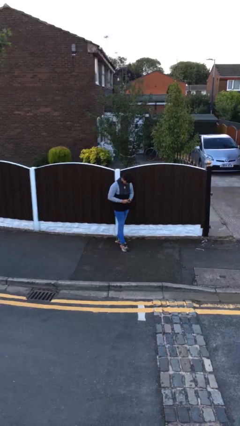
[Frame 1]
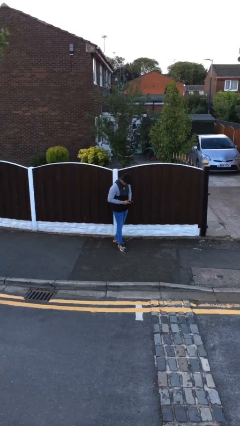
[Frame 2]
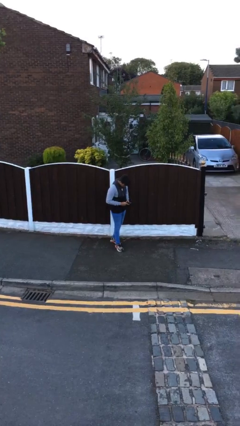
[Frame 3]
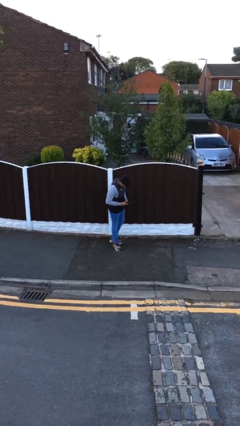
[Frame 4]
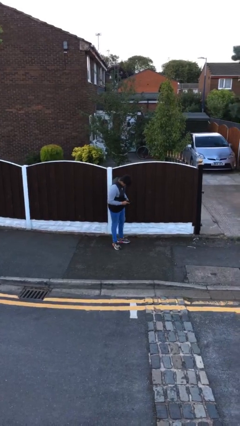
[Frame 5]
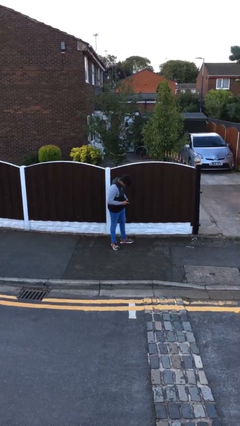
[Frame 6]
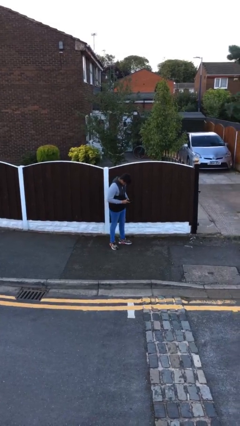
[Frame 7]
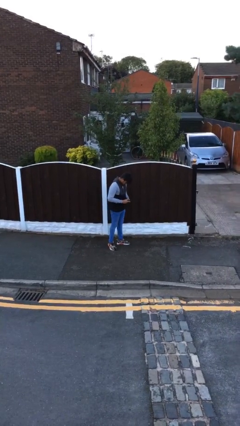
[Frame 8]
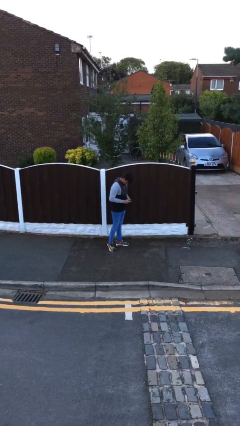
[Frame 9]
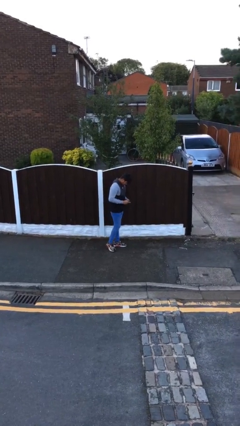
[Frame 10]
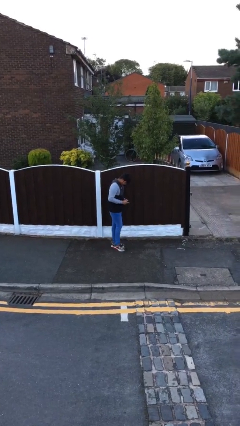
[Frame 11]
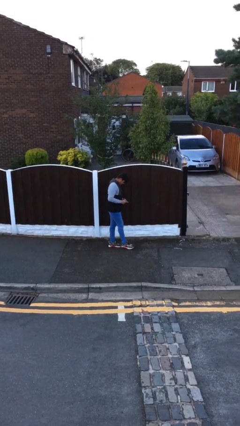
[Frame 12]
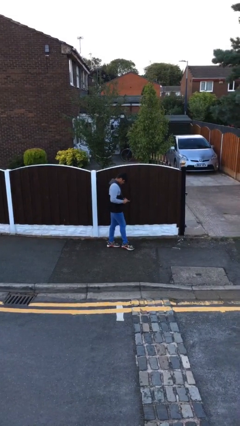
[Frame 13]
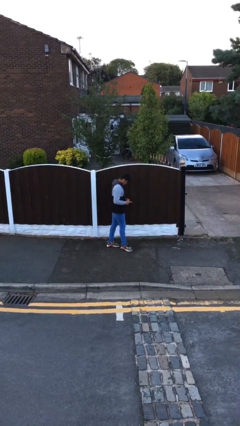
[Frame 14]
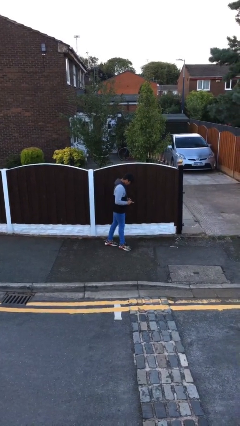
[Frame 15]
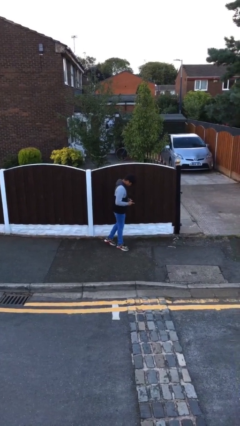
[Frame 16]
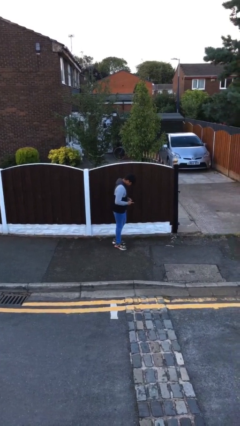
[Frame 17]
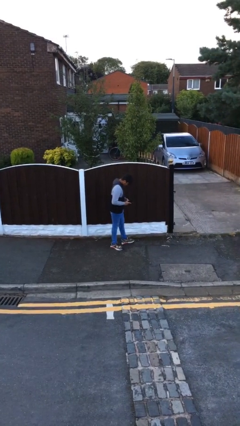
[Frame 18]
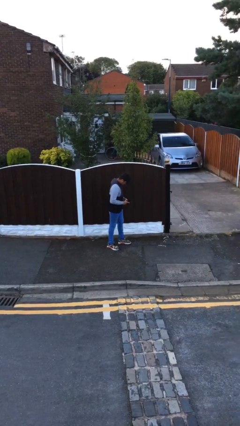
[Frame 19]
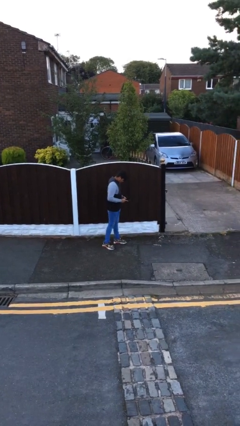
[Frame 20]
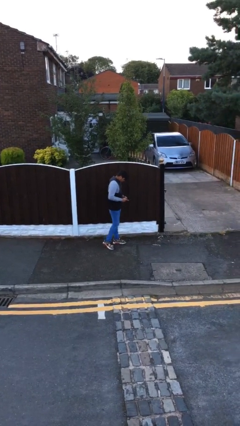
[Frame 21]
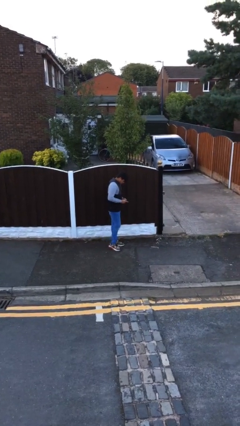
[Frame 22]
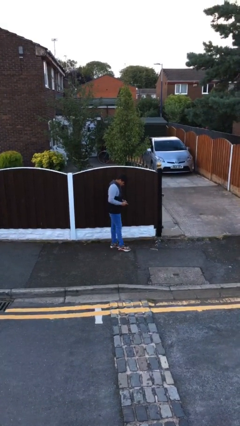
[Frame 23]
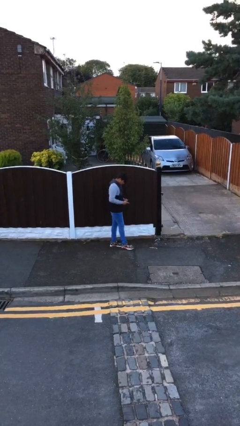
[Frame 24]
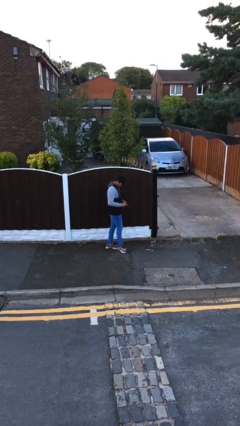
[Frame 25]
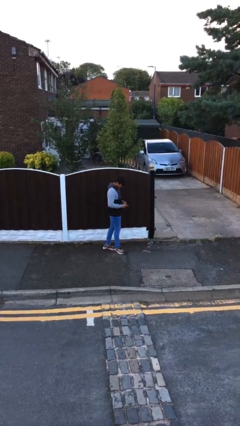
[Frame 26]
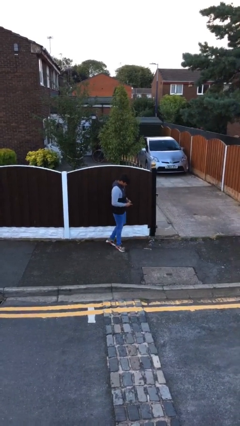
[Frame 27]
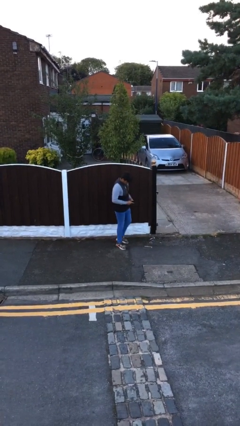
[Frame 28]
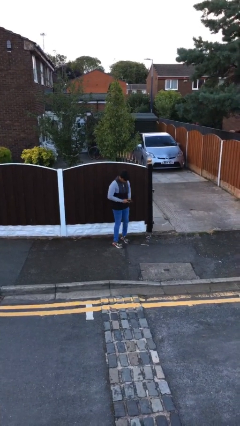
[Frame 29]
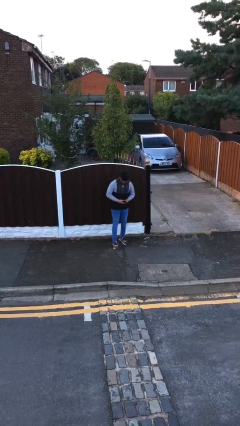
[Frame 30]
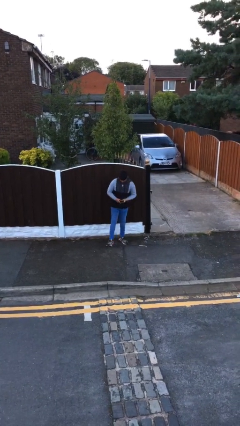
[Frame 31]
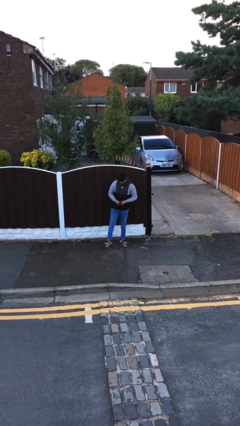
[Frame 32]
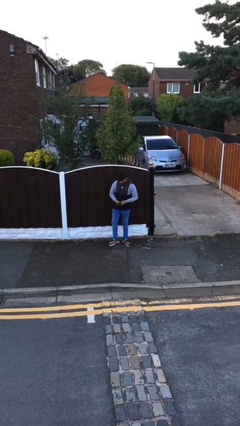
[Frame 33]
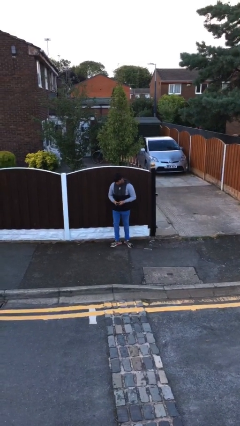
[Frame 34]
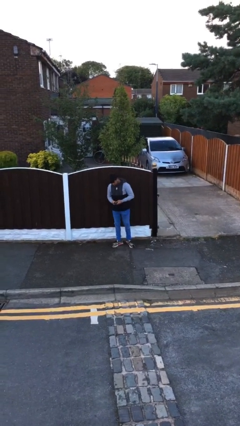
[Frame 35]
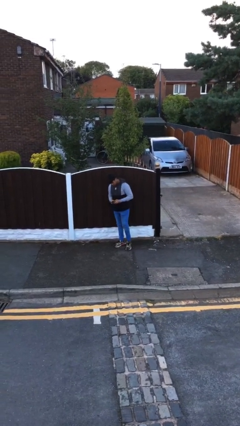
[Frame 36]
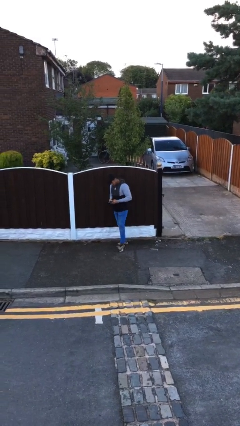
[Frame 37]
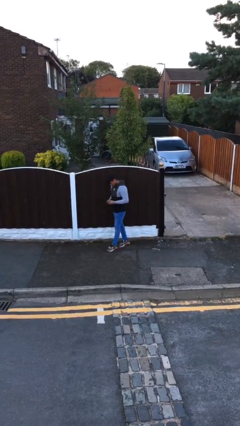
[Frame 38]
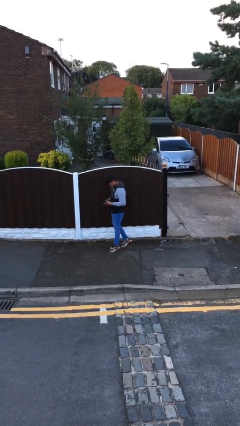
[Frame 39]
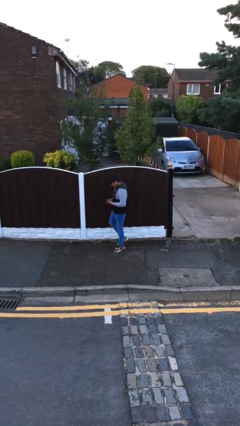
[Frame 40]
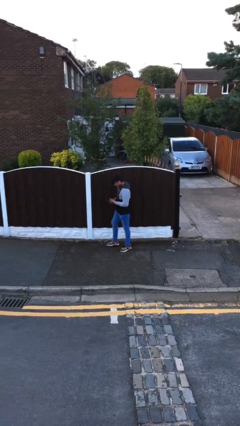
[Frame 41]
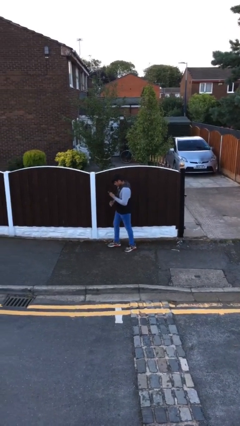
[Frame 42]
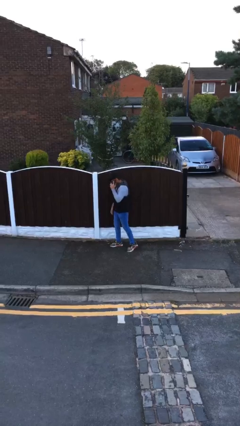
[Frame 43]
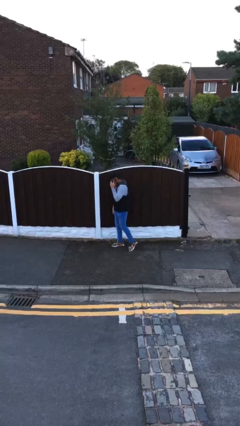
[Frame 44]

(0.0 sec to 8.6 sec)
person texts on phone

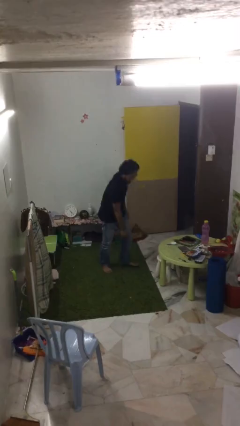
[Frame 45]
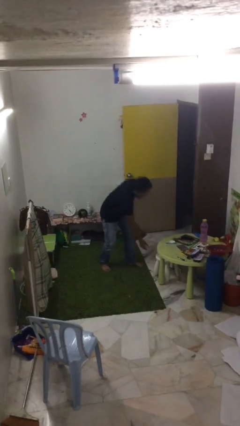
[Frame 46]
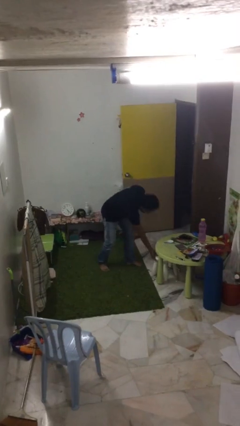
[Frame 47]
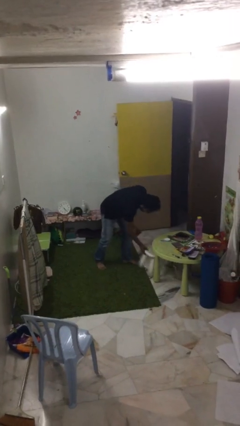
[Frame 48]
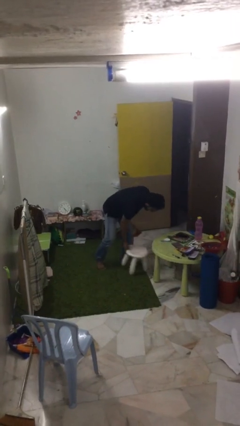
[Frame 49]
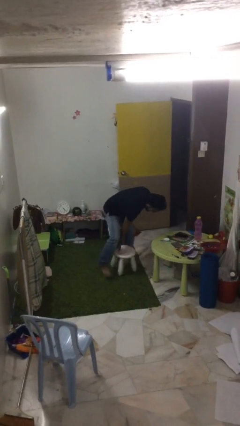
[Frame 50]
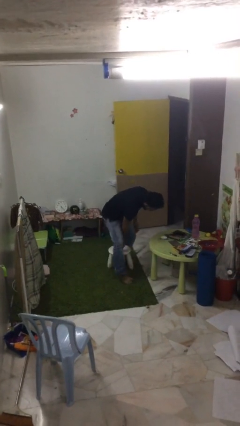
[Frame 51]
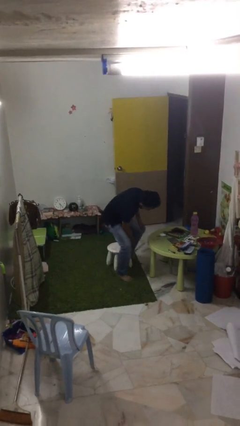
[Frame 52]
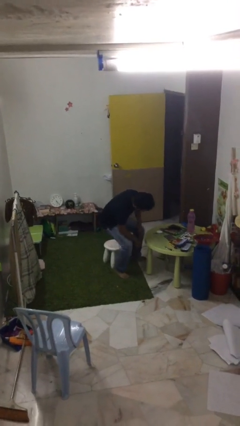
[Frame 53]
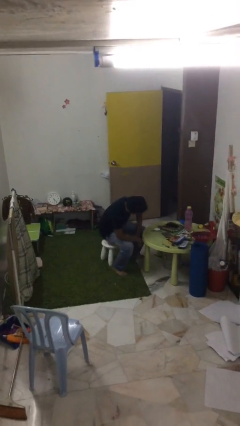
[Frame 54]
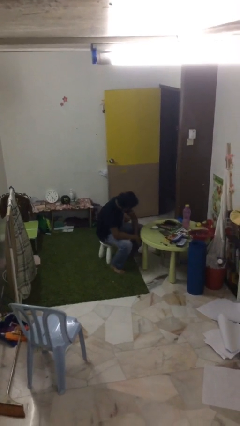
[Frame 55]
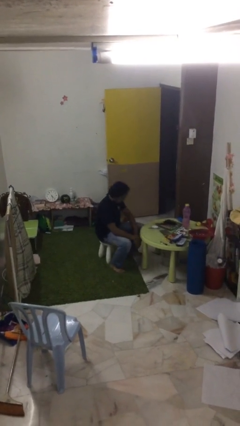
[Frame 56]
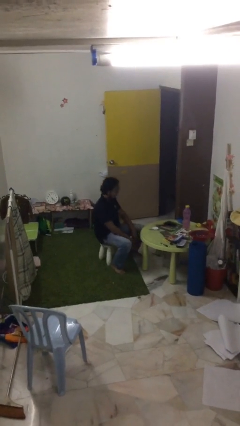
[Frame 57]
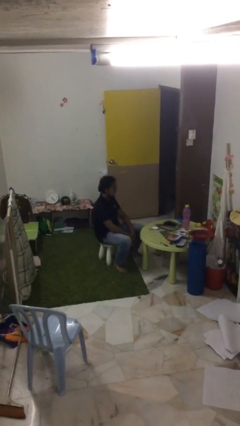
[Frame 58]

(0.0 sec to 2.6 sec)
person sits down

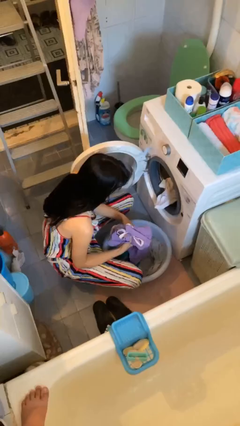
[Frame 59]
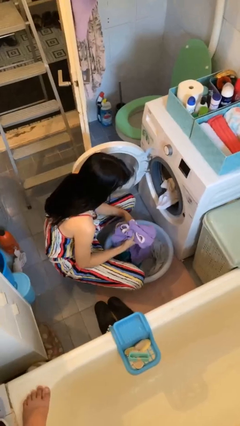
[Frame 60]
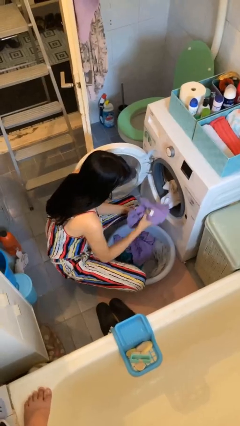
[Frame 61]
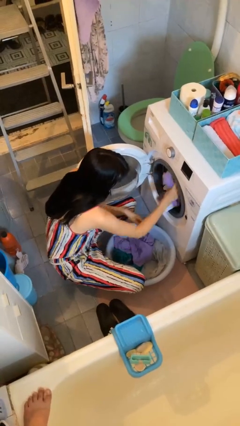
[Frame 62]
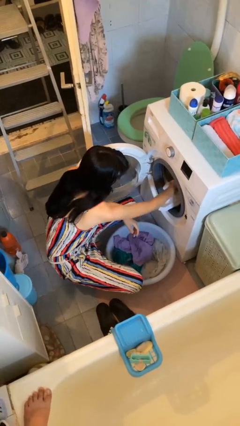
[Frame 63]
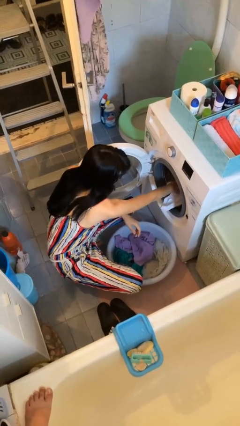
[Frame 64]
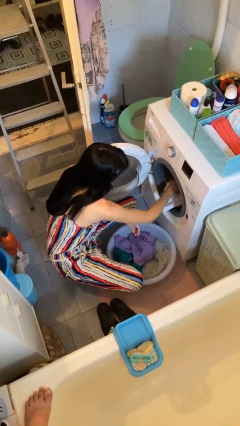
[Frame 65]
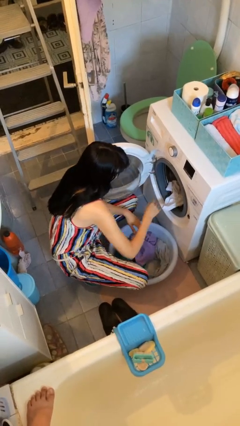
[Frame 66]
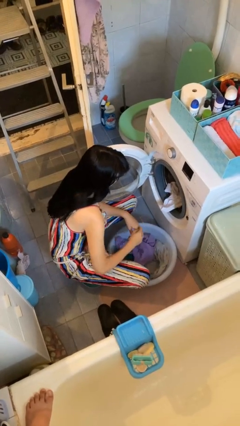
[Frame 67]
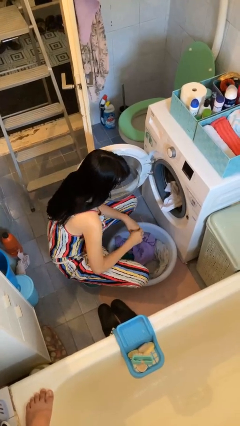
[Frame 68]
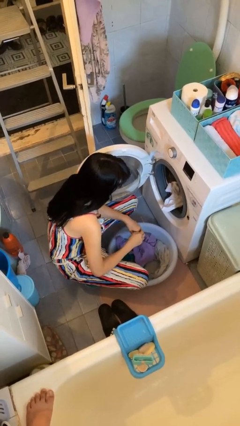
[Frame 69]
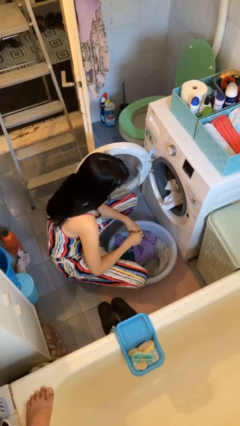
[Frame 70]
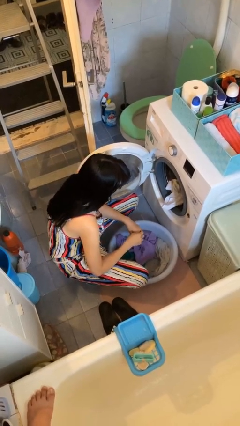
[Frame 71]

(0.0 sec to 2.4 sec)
person unloads clotheswasher

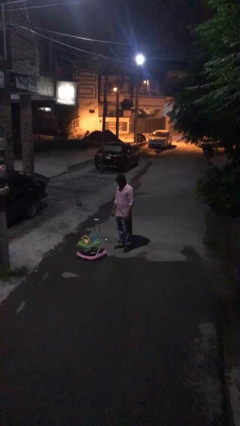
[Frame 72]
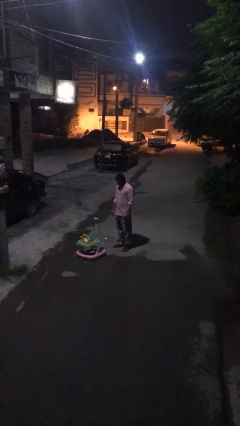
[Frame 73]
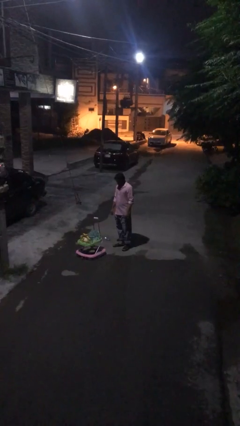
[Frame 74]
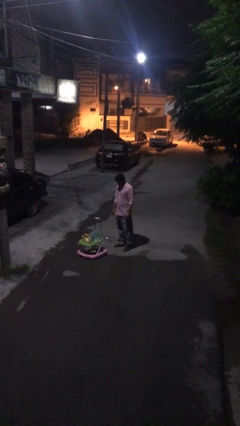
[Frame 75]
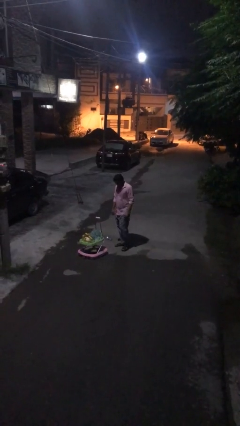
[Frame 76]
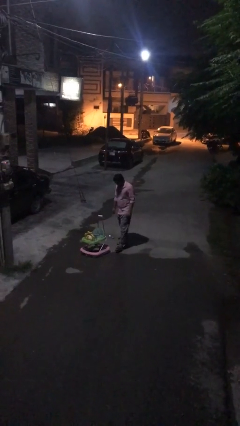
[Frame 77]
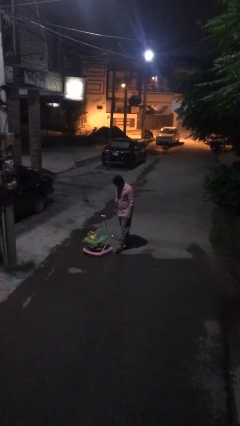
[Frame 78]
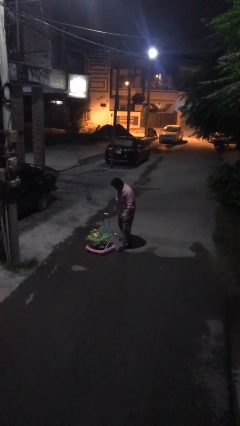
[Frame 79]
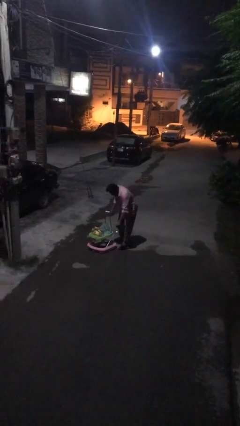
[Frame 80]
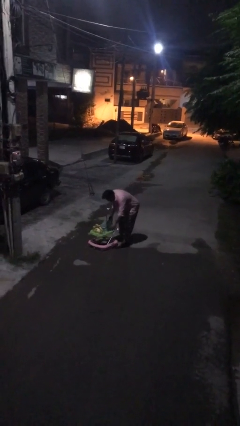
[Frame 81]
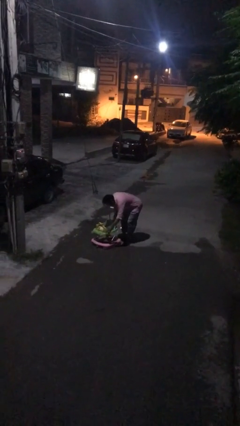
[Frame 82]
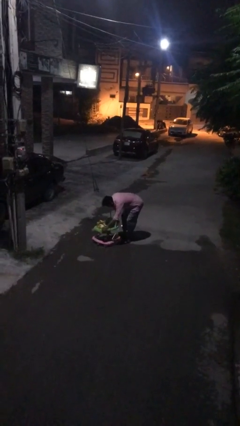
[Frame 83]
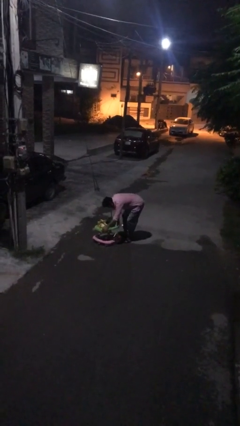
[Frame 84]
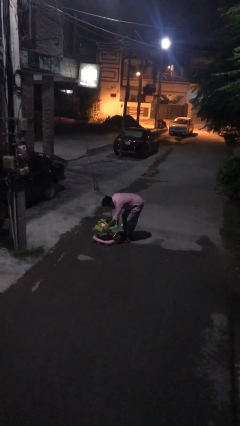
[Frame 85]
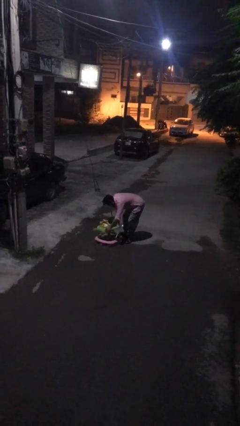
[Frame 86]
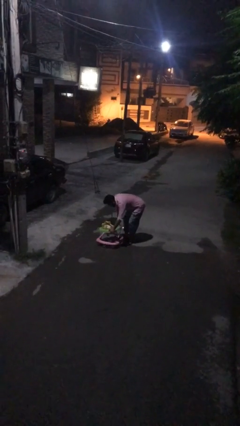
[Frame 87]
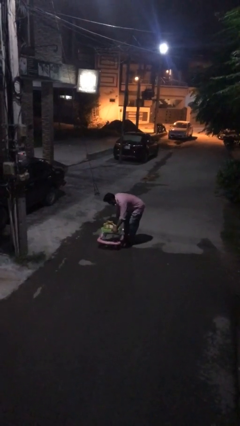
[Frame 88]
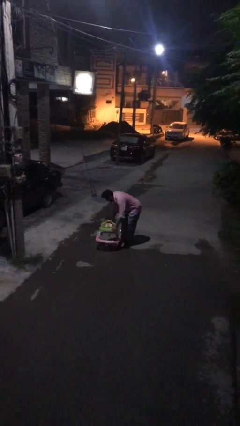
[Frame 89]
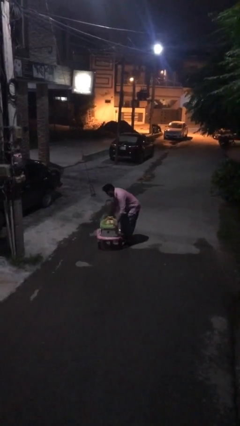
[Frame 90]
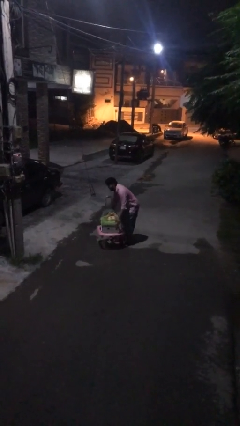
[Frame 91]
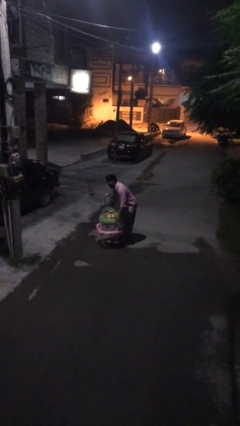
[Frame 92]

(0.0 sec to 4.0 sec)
person picks up object from floor
